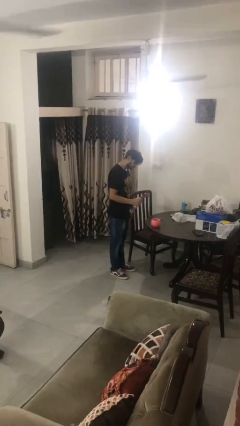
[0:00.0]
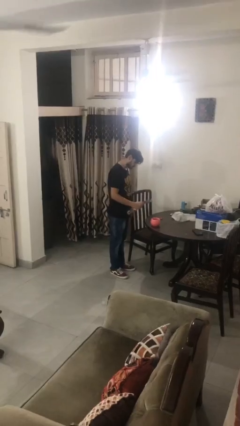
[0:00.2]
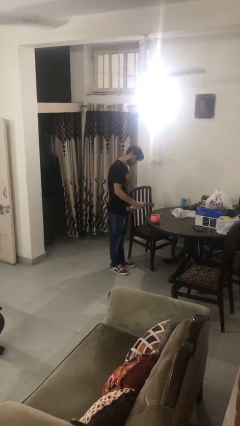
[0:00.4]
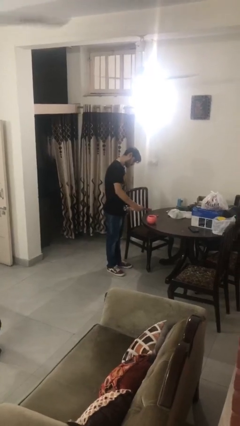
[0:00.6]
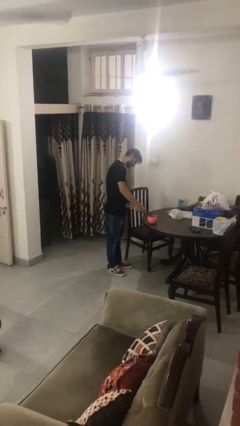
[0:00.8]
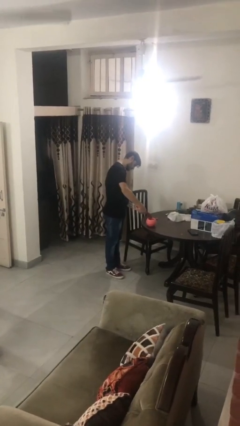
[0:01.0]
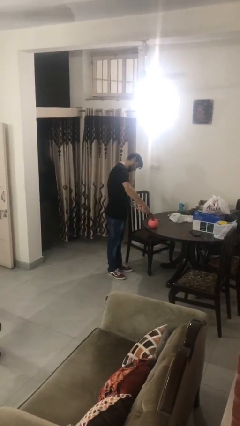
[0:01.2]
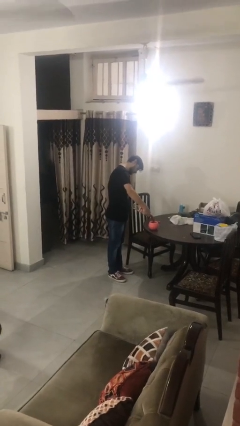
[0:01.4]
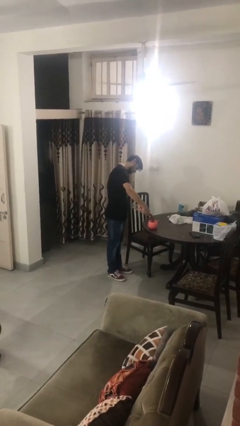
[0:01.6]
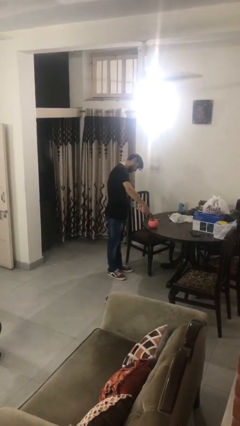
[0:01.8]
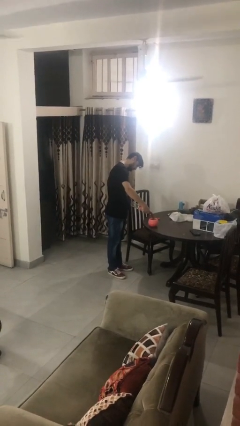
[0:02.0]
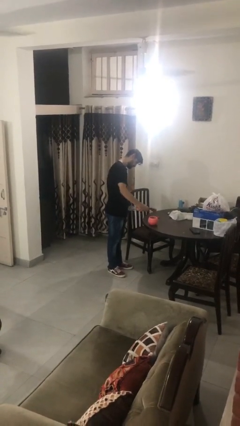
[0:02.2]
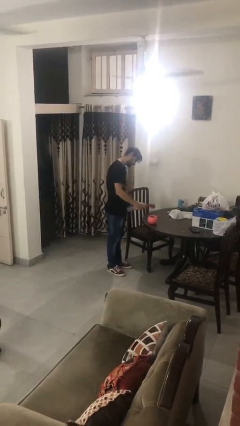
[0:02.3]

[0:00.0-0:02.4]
person waters houseplant

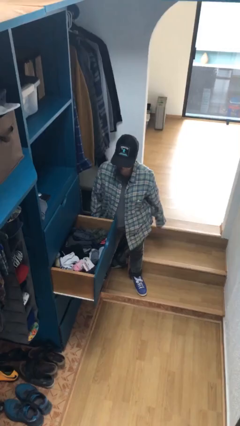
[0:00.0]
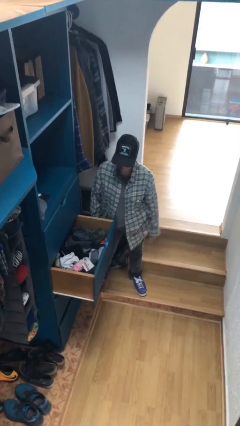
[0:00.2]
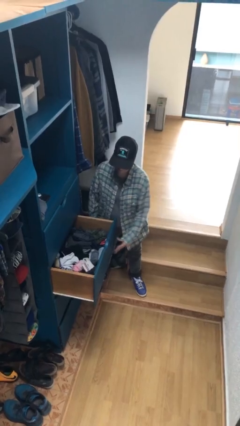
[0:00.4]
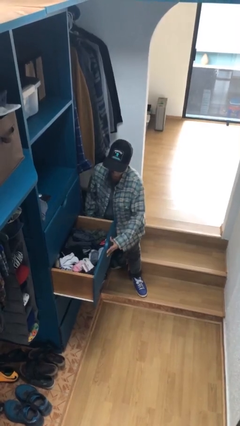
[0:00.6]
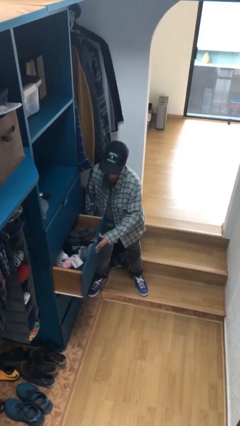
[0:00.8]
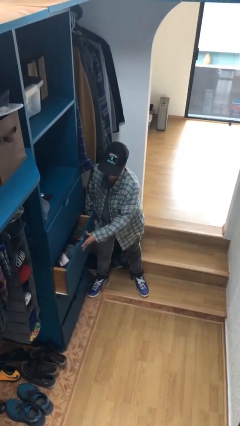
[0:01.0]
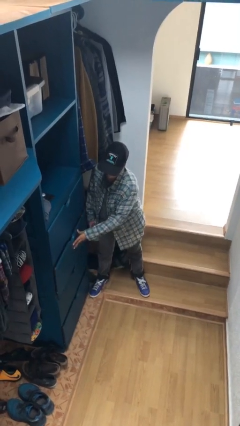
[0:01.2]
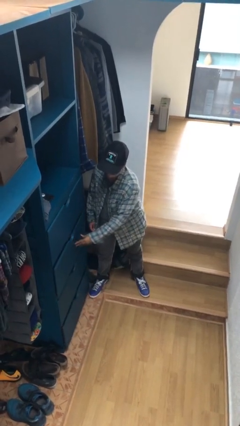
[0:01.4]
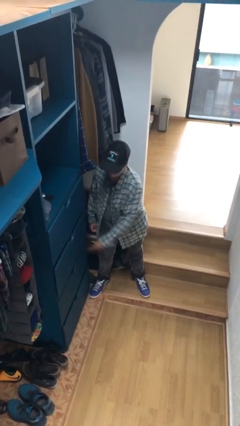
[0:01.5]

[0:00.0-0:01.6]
person closes dresser drawer

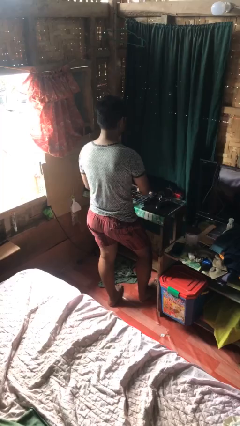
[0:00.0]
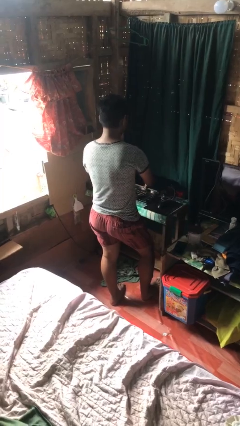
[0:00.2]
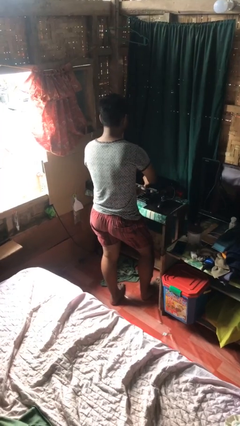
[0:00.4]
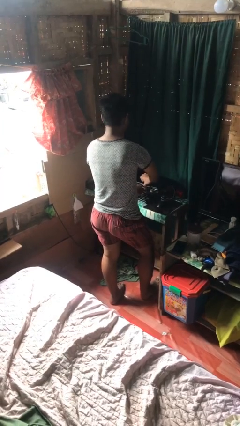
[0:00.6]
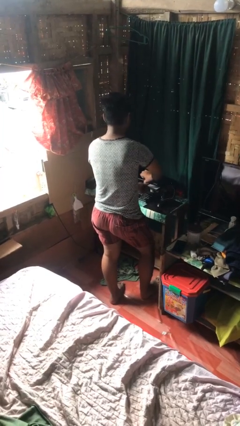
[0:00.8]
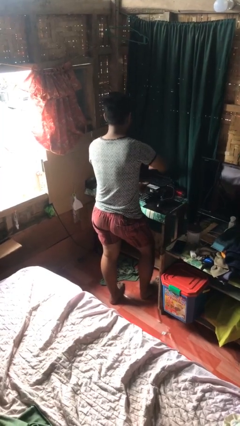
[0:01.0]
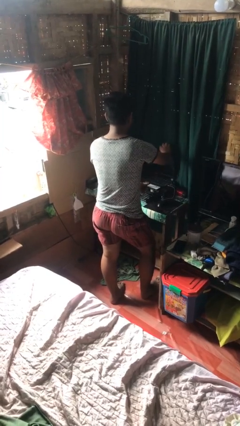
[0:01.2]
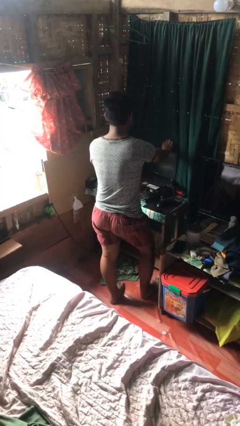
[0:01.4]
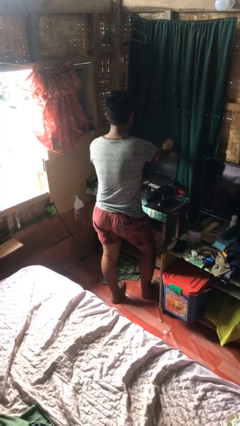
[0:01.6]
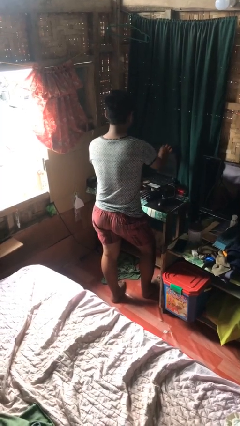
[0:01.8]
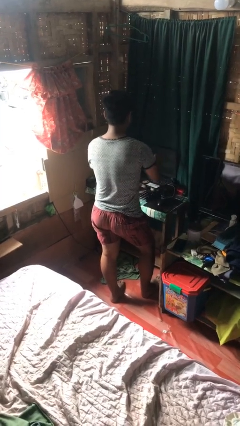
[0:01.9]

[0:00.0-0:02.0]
person opens laptop

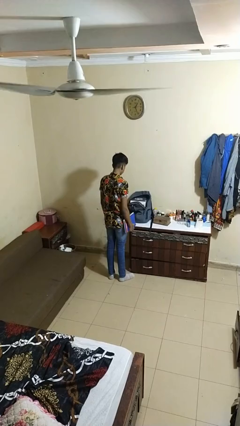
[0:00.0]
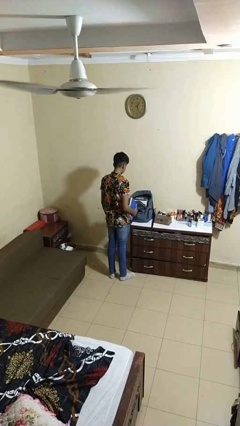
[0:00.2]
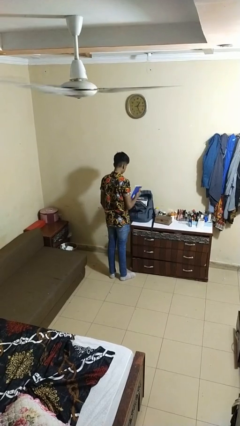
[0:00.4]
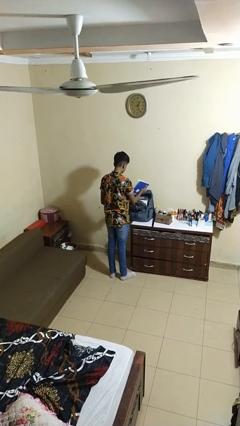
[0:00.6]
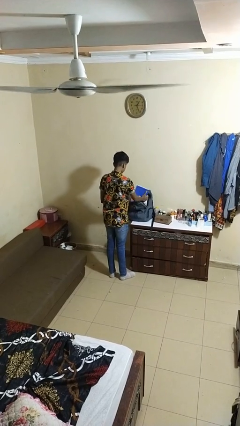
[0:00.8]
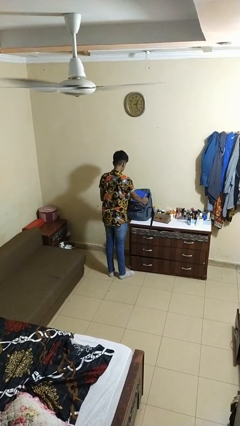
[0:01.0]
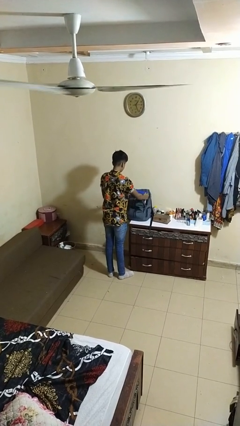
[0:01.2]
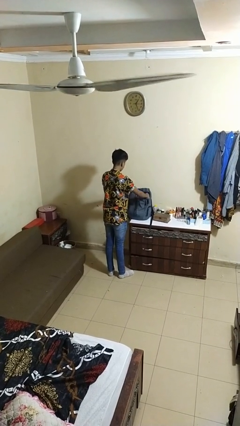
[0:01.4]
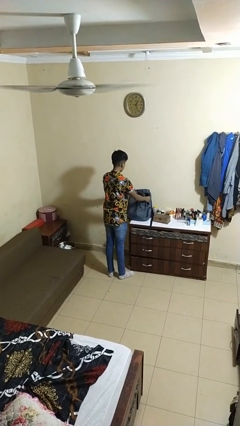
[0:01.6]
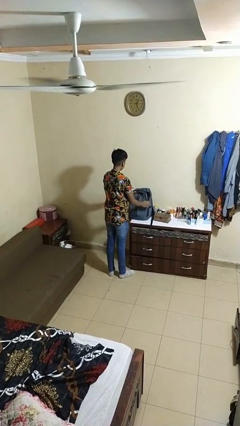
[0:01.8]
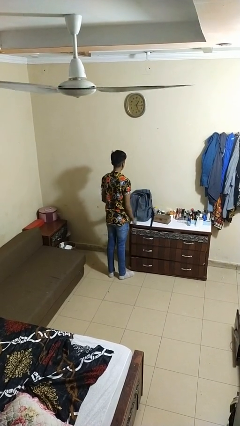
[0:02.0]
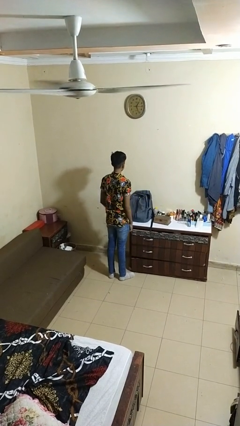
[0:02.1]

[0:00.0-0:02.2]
person puts object into backpack

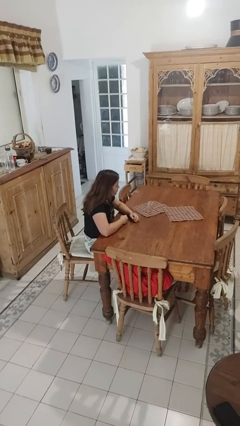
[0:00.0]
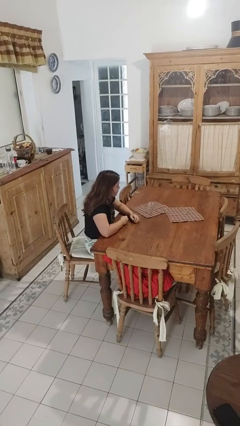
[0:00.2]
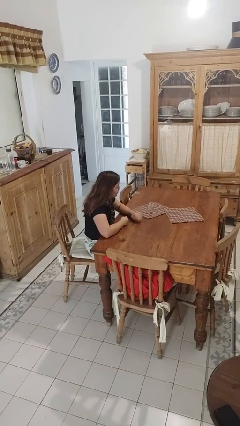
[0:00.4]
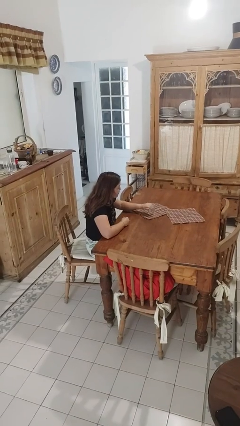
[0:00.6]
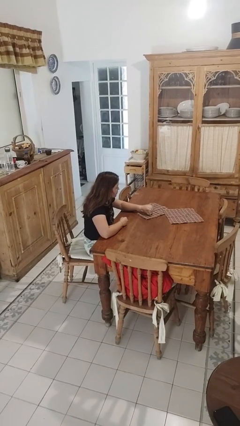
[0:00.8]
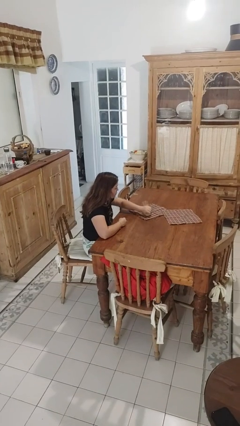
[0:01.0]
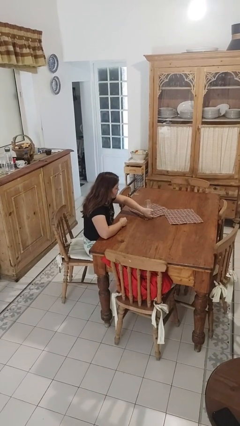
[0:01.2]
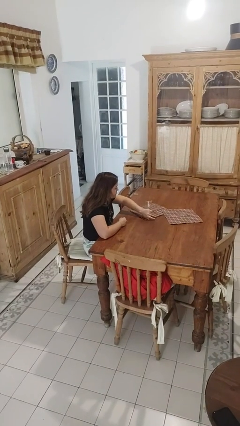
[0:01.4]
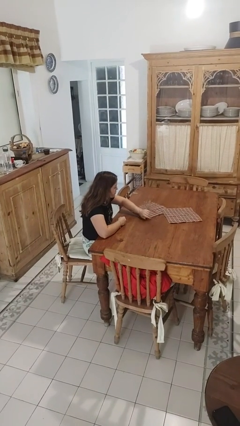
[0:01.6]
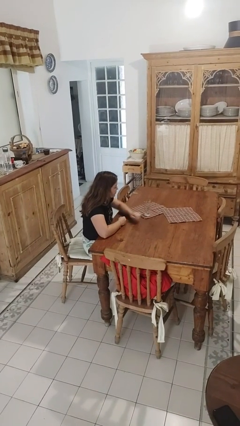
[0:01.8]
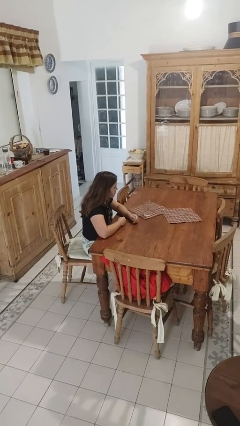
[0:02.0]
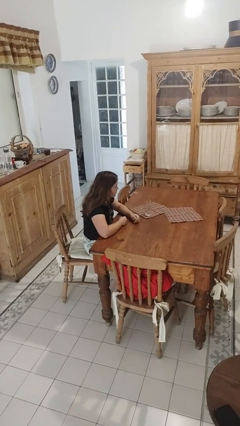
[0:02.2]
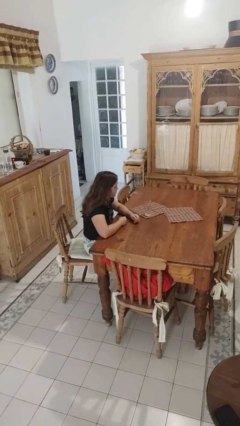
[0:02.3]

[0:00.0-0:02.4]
person sets upright glass

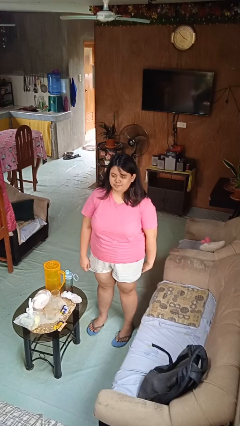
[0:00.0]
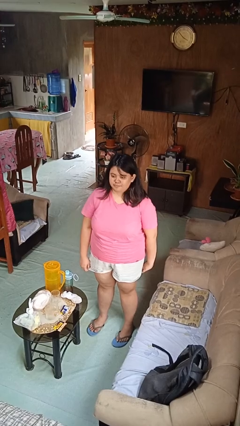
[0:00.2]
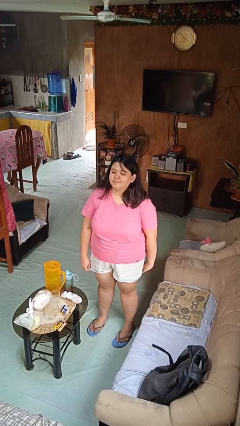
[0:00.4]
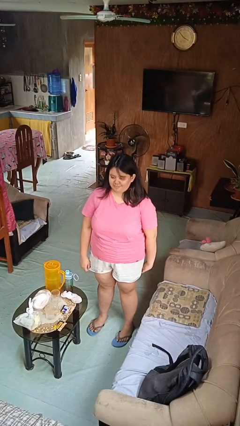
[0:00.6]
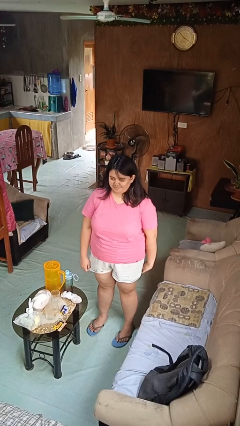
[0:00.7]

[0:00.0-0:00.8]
person nods head

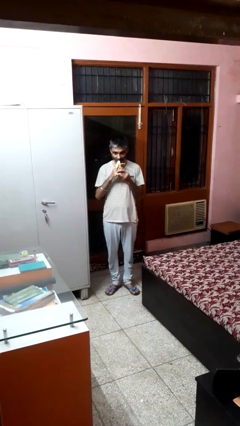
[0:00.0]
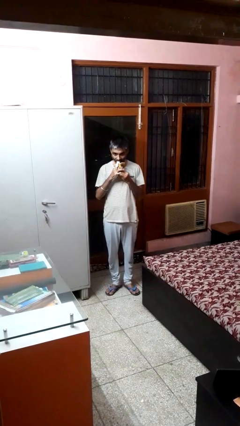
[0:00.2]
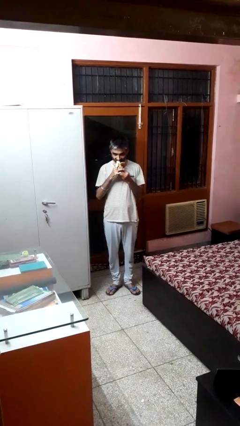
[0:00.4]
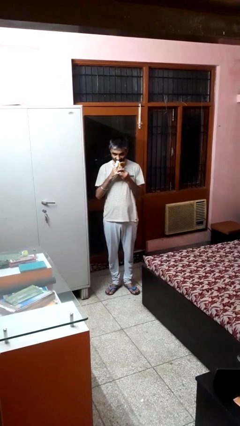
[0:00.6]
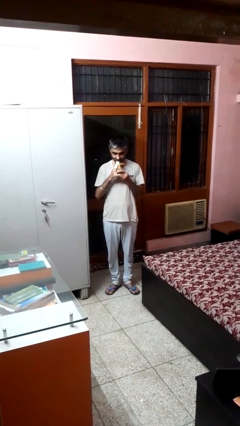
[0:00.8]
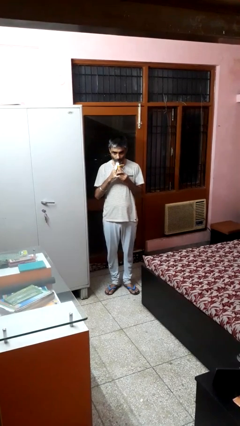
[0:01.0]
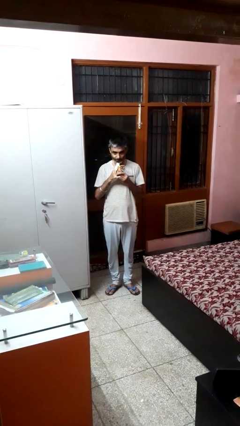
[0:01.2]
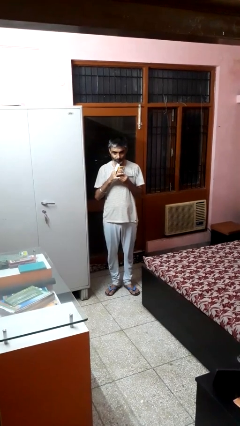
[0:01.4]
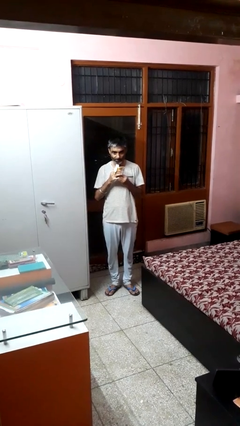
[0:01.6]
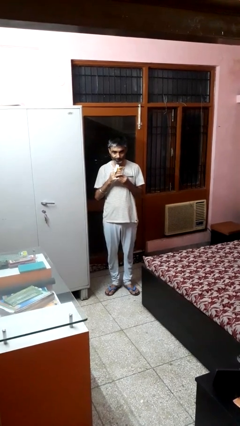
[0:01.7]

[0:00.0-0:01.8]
person eats banana

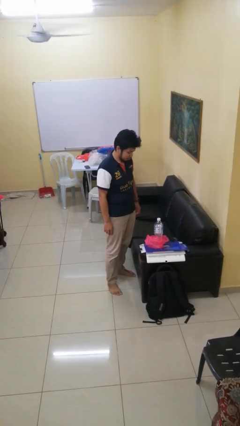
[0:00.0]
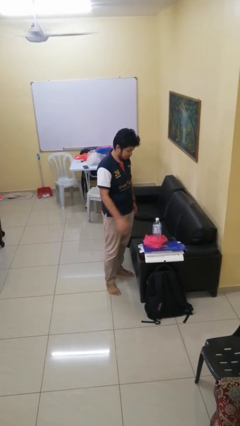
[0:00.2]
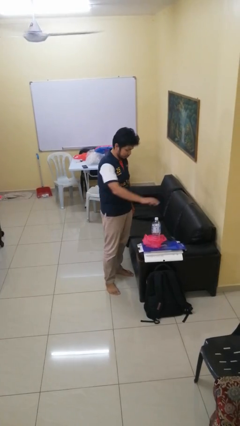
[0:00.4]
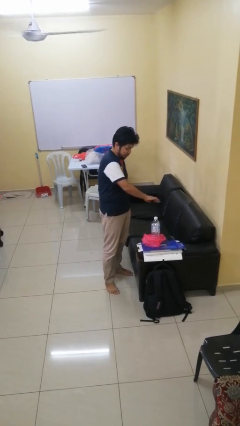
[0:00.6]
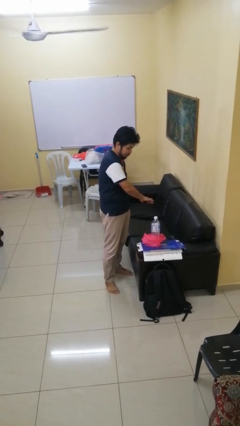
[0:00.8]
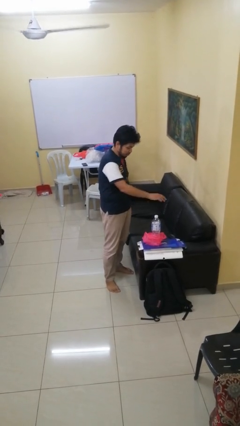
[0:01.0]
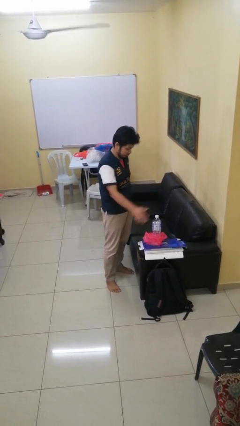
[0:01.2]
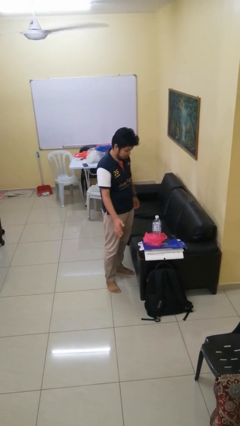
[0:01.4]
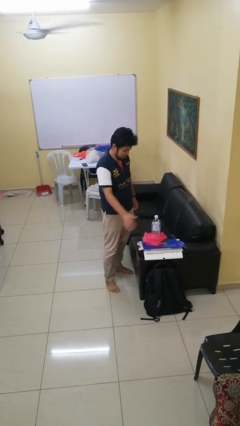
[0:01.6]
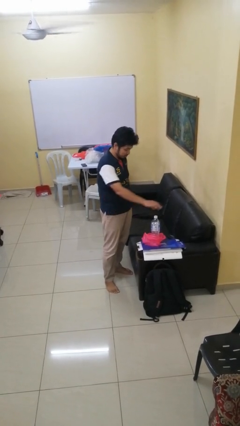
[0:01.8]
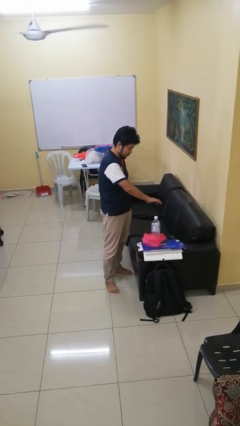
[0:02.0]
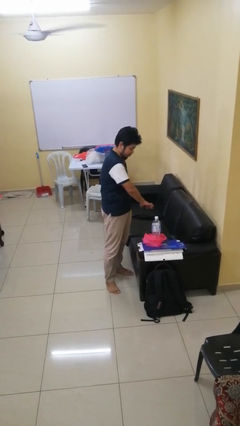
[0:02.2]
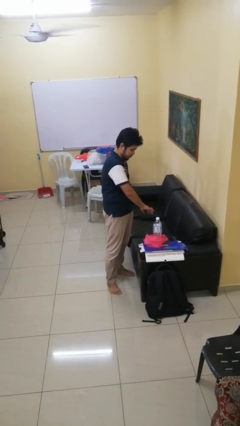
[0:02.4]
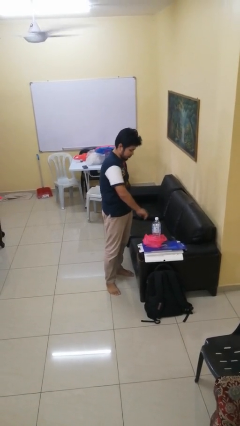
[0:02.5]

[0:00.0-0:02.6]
person waves hand over object

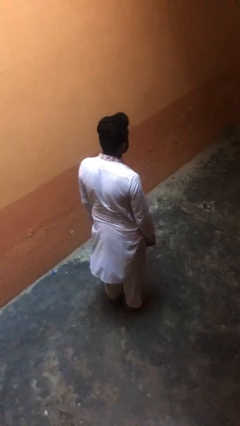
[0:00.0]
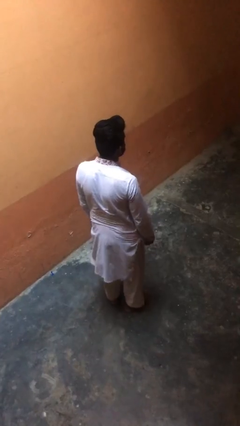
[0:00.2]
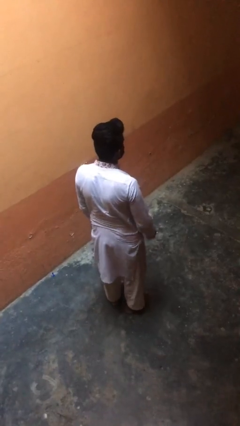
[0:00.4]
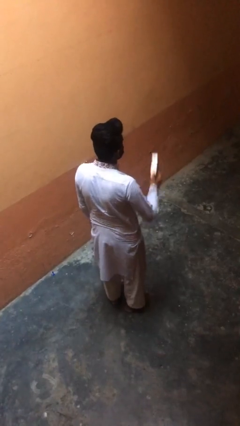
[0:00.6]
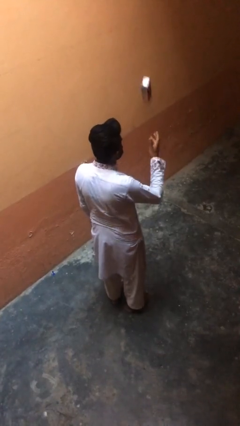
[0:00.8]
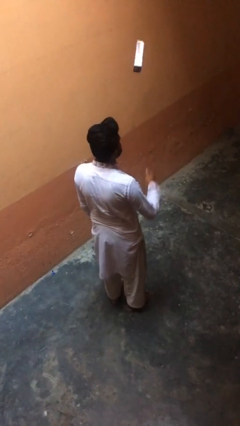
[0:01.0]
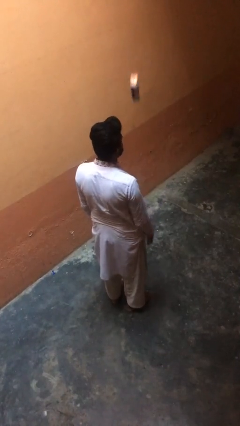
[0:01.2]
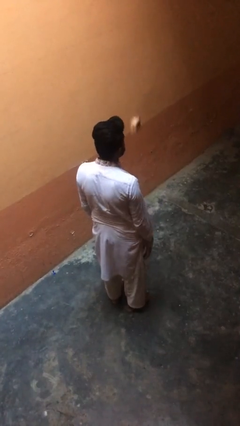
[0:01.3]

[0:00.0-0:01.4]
person throws object into air
